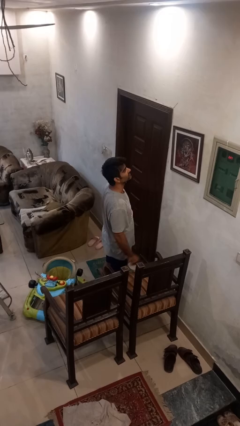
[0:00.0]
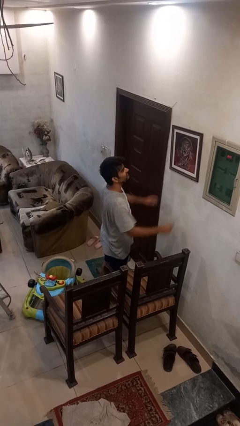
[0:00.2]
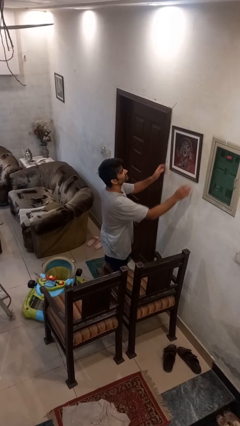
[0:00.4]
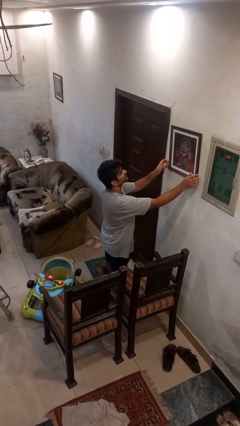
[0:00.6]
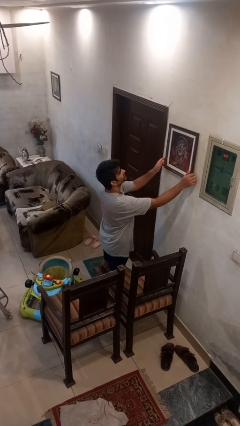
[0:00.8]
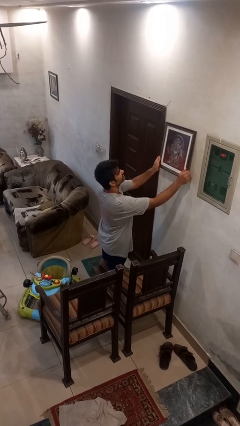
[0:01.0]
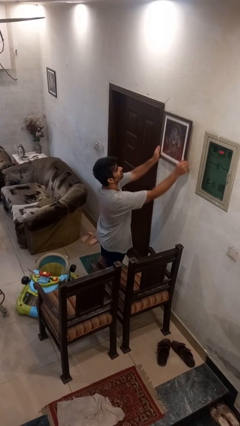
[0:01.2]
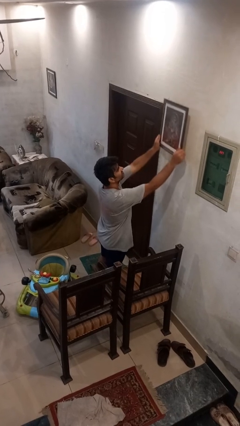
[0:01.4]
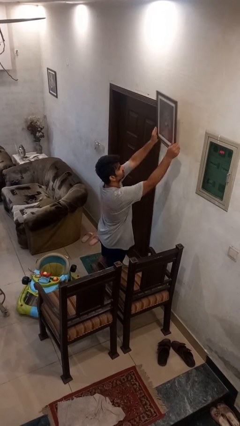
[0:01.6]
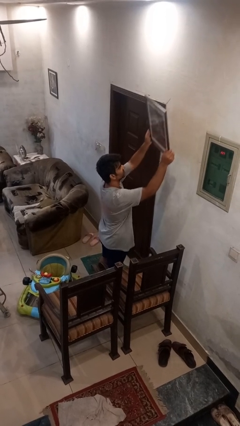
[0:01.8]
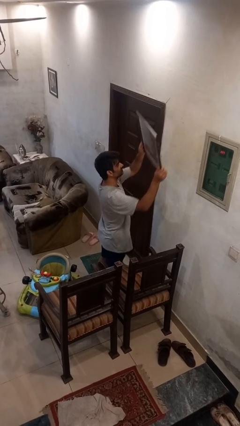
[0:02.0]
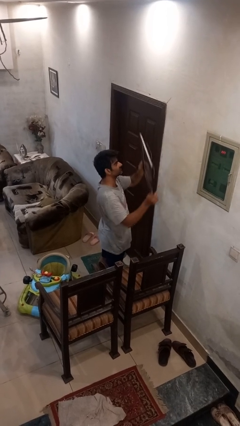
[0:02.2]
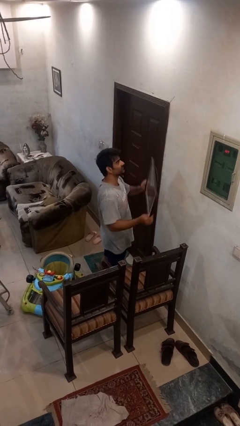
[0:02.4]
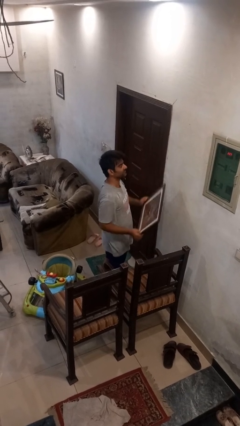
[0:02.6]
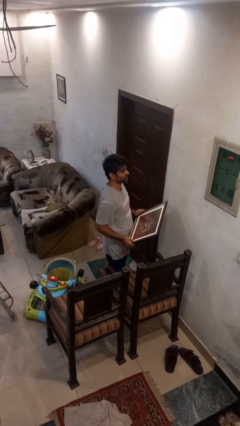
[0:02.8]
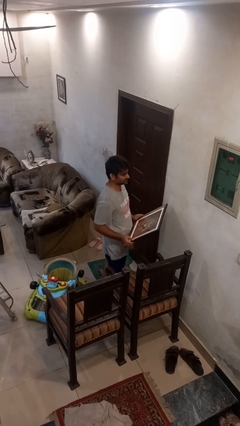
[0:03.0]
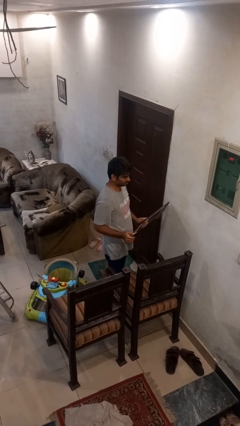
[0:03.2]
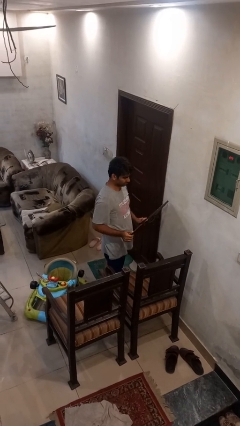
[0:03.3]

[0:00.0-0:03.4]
person takes down picture frame

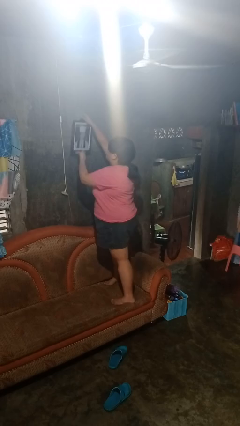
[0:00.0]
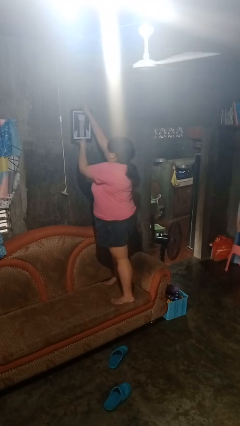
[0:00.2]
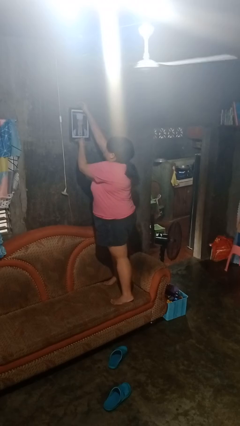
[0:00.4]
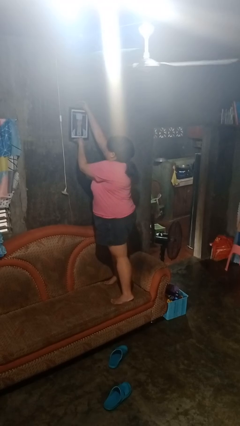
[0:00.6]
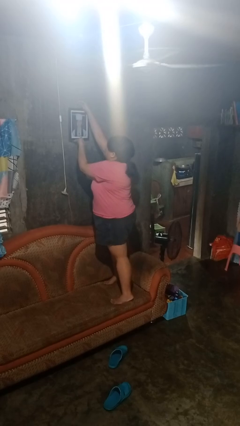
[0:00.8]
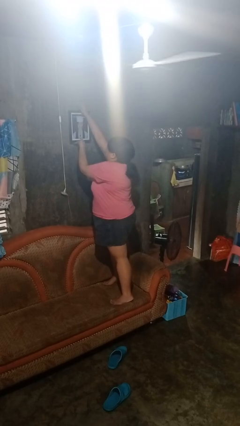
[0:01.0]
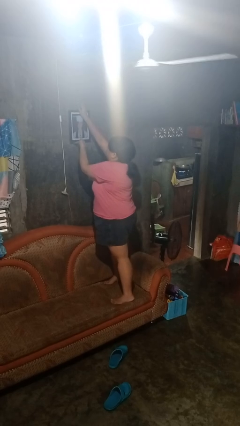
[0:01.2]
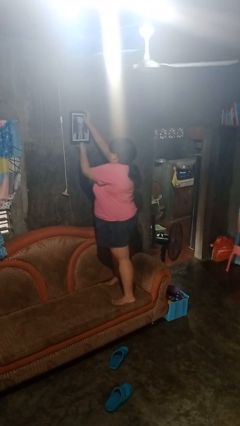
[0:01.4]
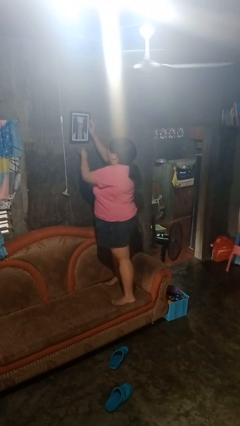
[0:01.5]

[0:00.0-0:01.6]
person puts up picture frame

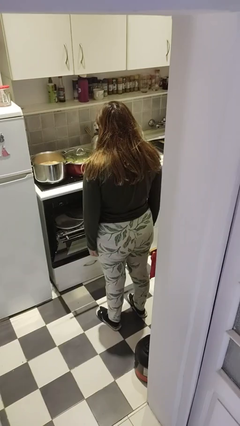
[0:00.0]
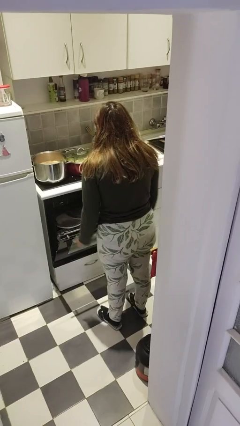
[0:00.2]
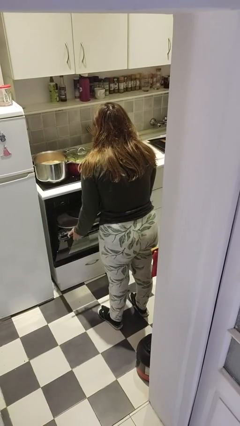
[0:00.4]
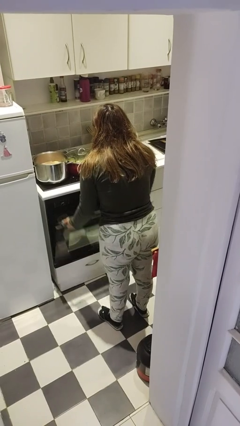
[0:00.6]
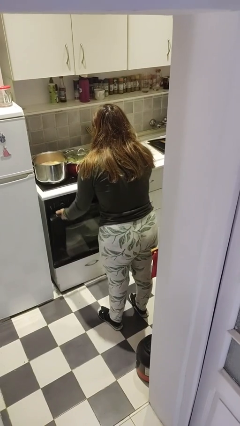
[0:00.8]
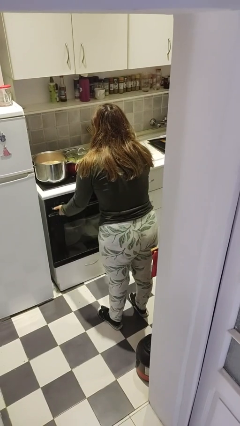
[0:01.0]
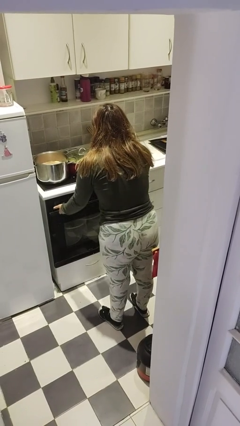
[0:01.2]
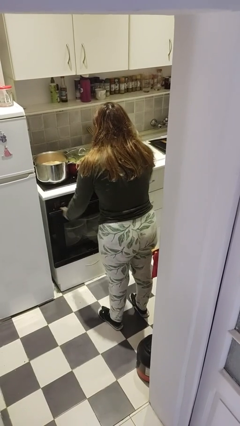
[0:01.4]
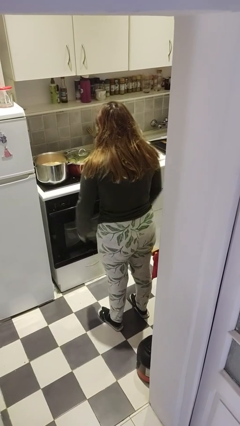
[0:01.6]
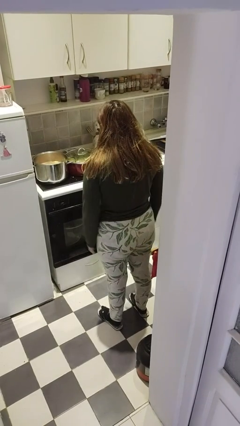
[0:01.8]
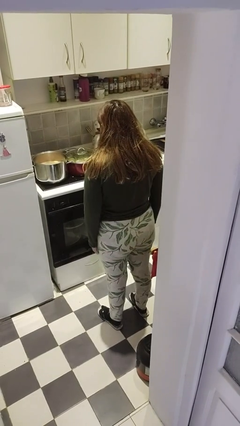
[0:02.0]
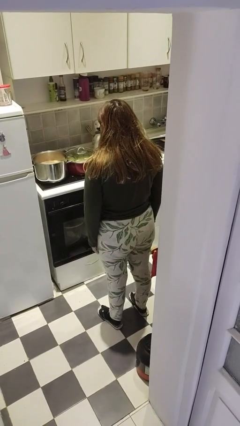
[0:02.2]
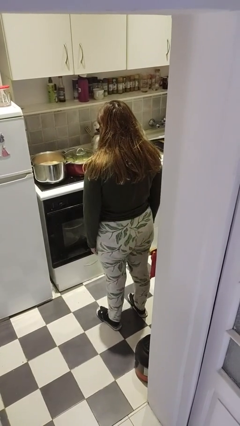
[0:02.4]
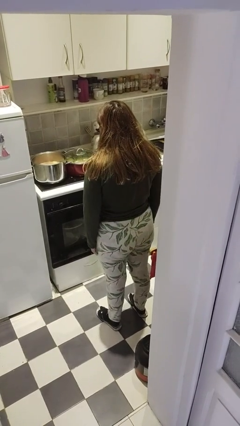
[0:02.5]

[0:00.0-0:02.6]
person closes dishwasher

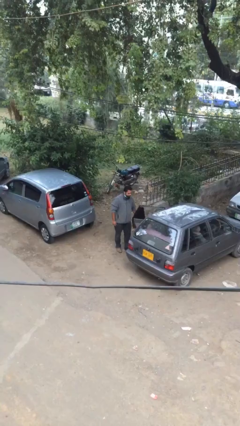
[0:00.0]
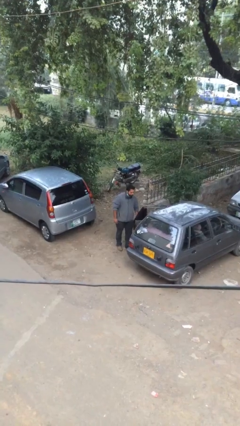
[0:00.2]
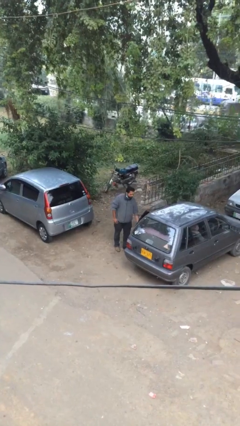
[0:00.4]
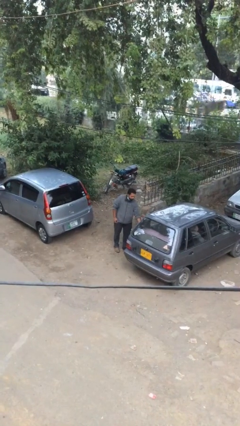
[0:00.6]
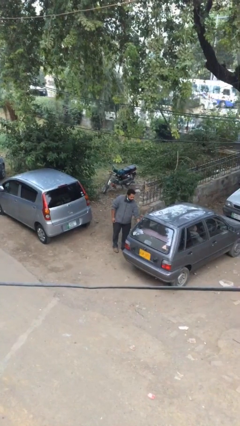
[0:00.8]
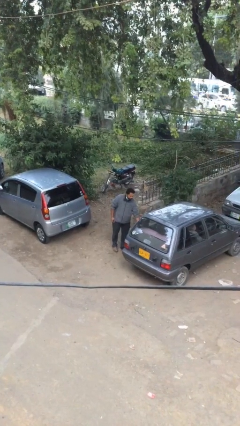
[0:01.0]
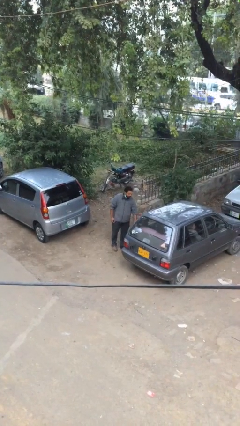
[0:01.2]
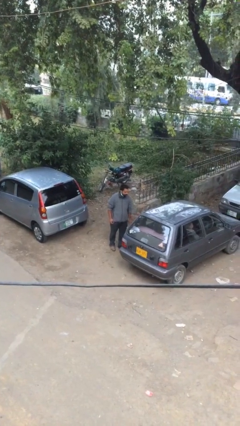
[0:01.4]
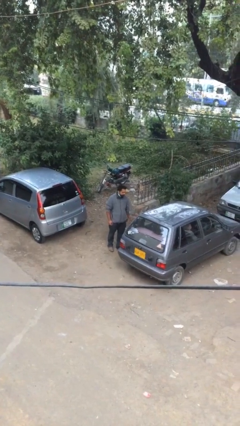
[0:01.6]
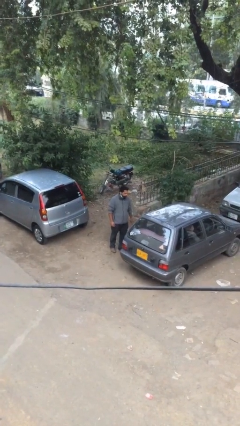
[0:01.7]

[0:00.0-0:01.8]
person closes car door

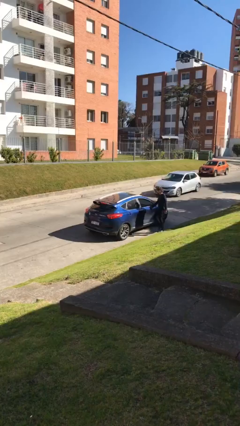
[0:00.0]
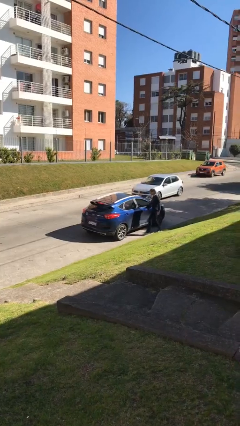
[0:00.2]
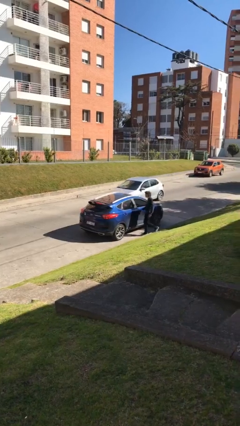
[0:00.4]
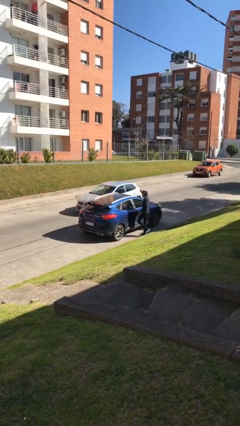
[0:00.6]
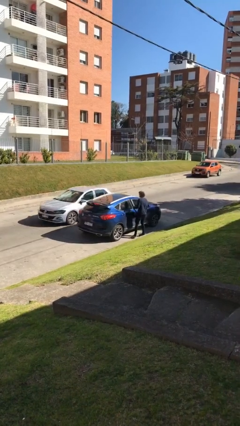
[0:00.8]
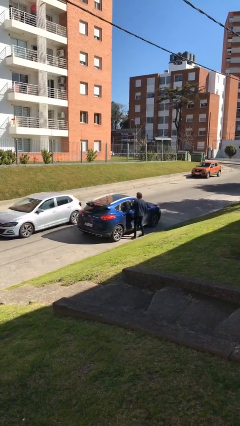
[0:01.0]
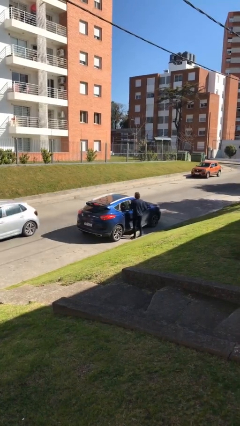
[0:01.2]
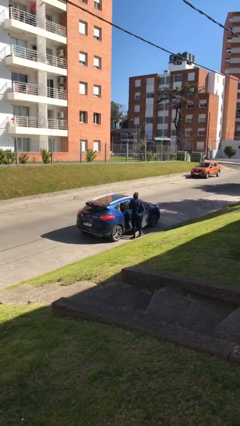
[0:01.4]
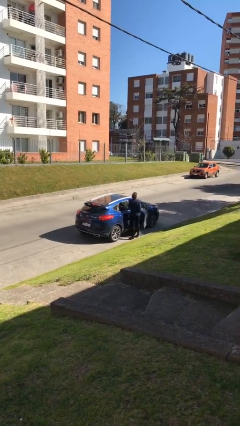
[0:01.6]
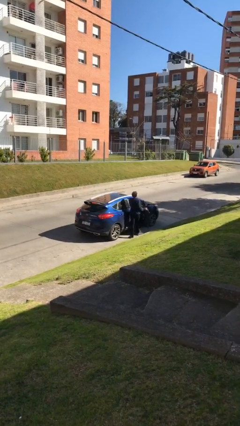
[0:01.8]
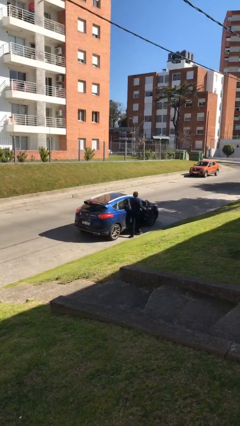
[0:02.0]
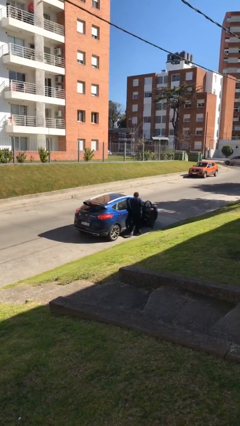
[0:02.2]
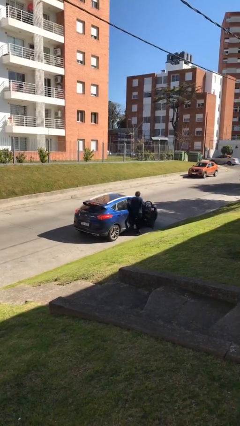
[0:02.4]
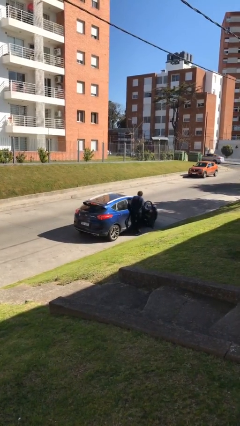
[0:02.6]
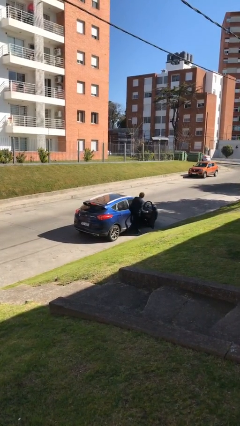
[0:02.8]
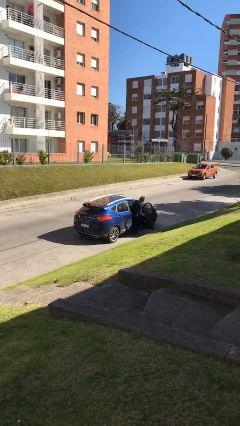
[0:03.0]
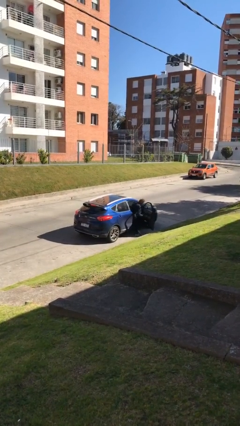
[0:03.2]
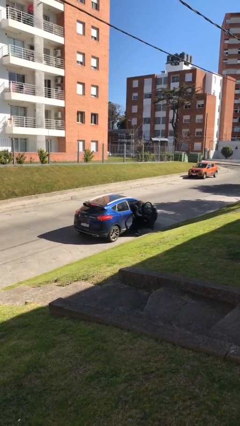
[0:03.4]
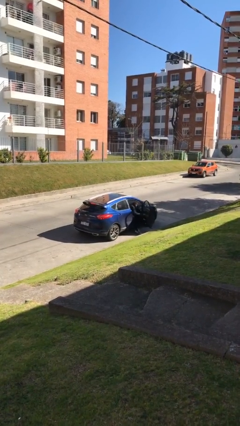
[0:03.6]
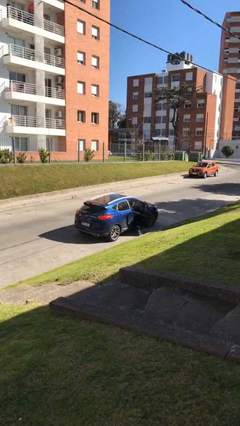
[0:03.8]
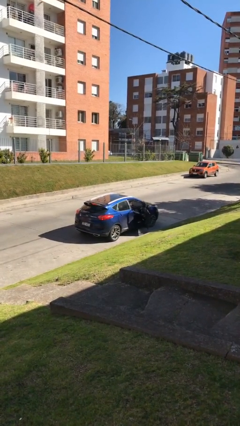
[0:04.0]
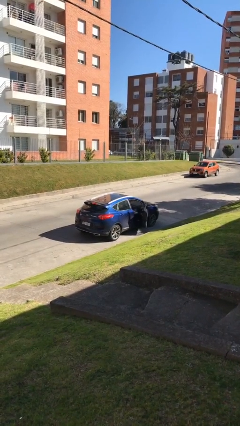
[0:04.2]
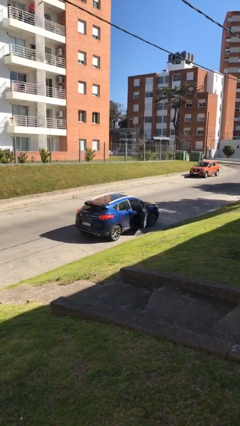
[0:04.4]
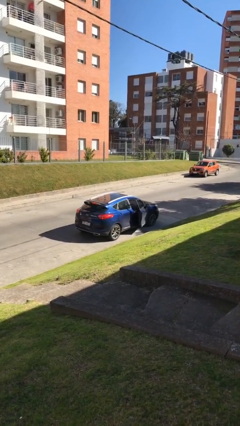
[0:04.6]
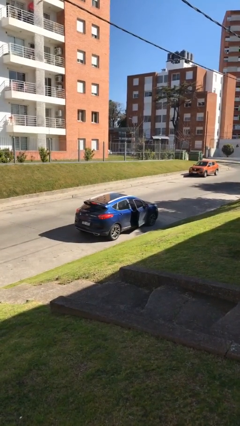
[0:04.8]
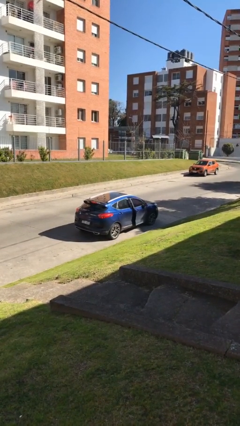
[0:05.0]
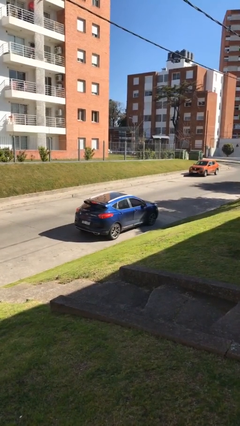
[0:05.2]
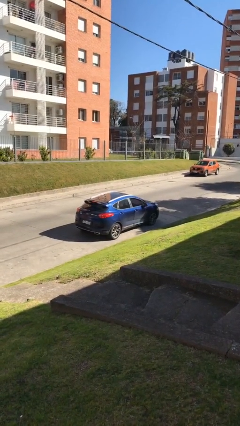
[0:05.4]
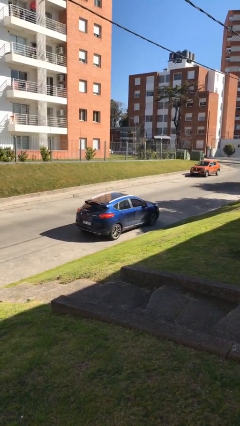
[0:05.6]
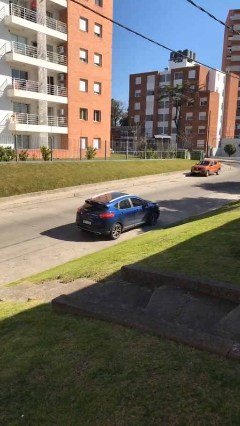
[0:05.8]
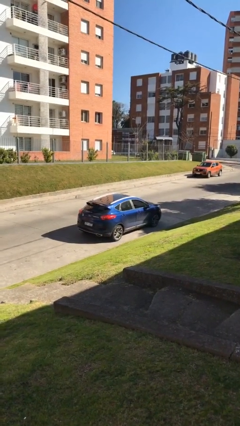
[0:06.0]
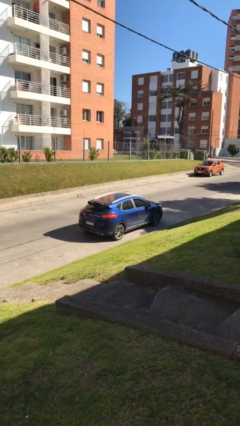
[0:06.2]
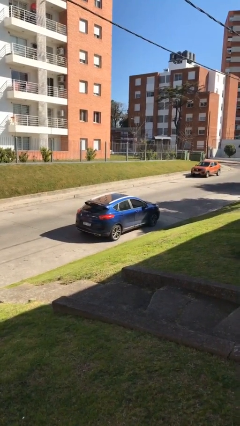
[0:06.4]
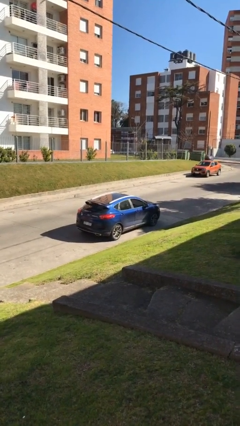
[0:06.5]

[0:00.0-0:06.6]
car picks up person

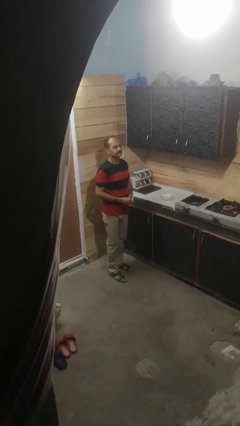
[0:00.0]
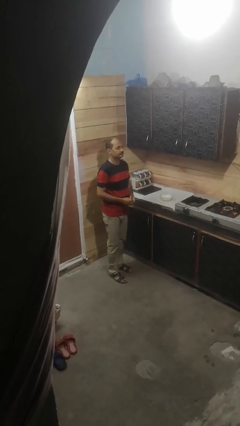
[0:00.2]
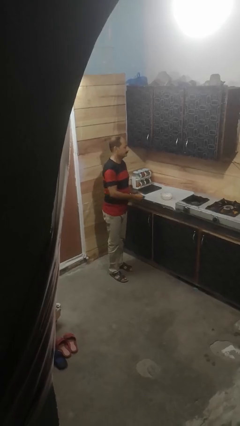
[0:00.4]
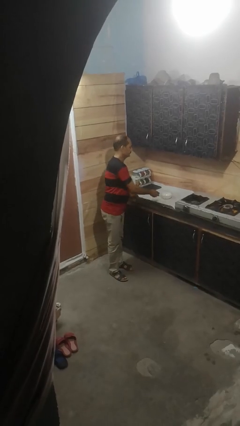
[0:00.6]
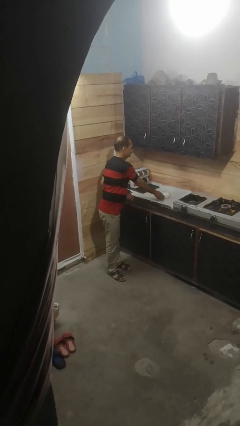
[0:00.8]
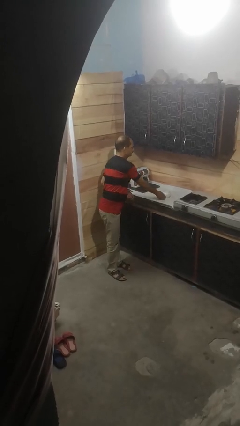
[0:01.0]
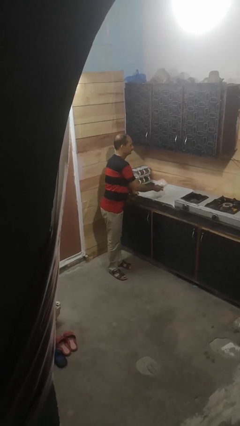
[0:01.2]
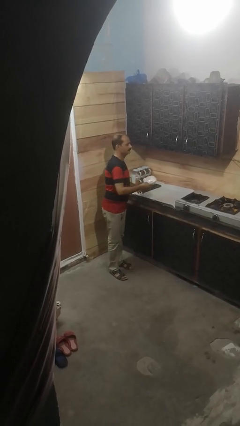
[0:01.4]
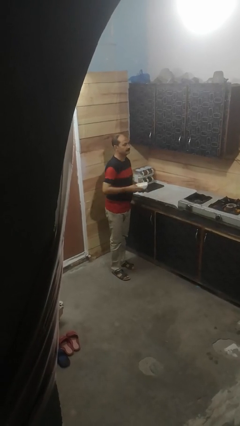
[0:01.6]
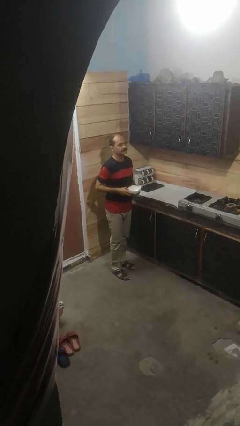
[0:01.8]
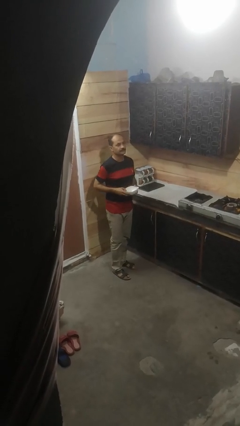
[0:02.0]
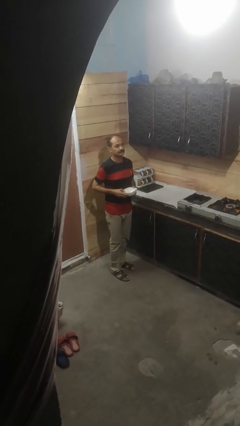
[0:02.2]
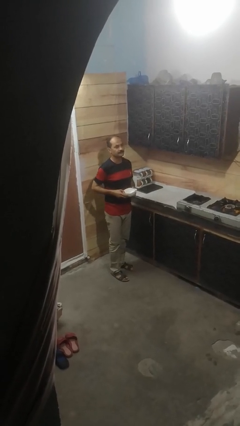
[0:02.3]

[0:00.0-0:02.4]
person picks up object from countertop
